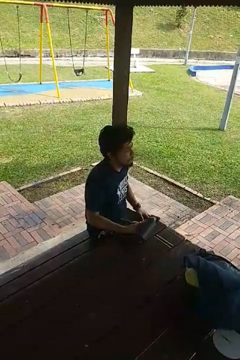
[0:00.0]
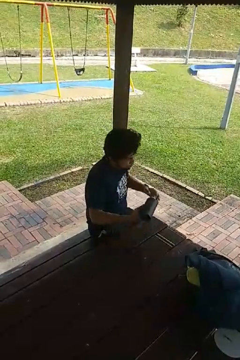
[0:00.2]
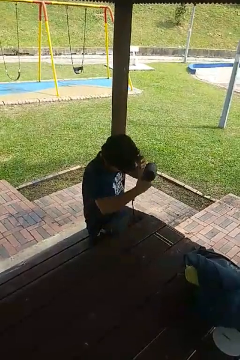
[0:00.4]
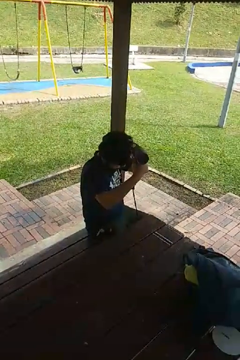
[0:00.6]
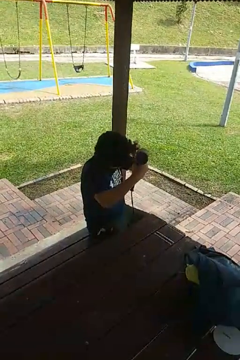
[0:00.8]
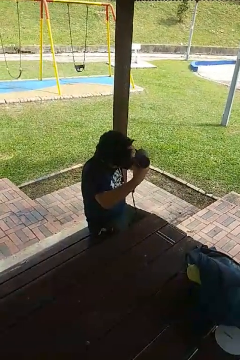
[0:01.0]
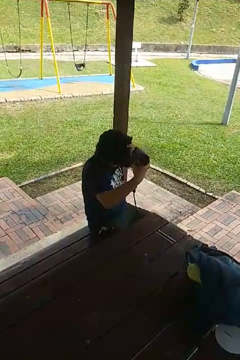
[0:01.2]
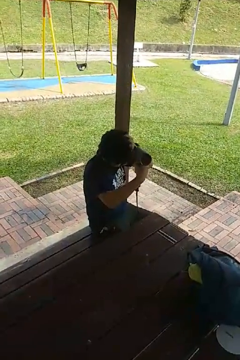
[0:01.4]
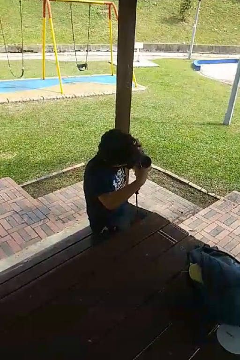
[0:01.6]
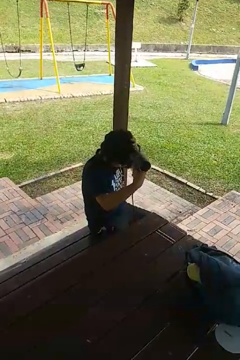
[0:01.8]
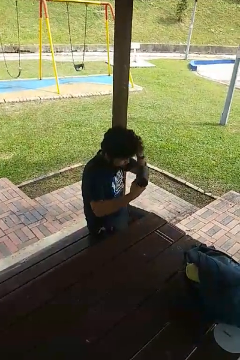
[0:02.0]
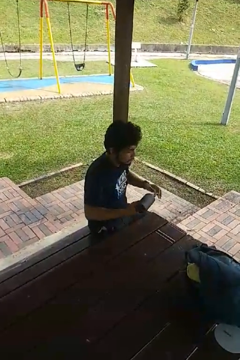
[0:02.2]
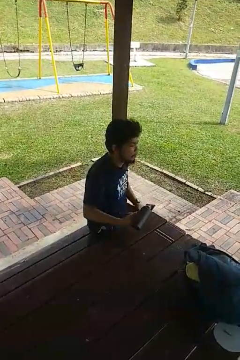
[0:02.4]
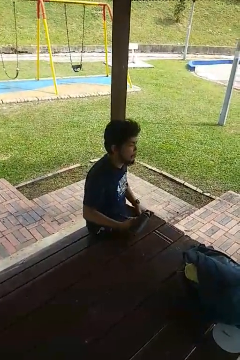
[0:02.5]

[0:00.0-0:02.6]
person dries hair with hairdryer

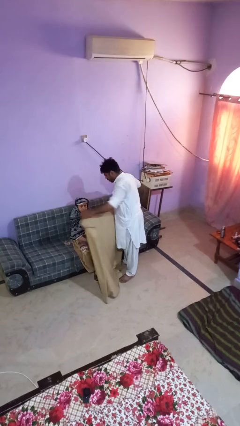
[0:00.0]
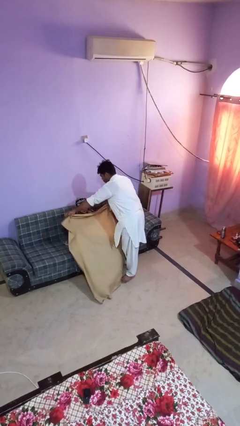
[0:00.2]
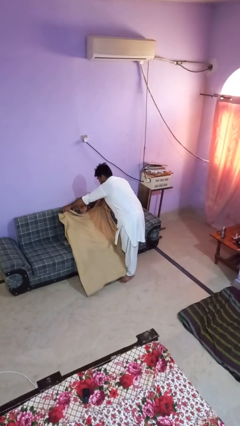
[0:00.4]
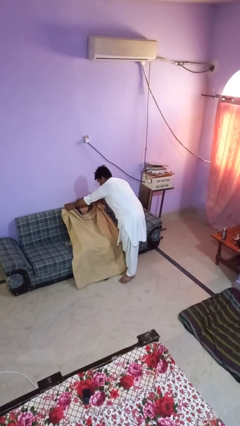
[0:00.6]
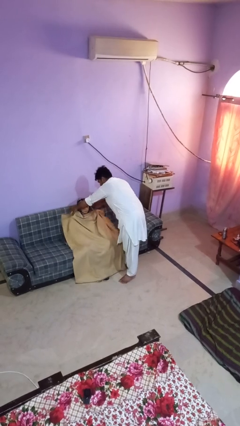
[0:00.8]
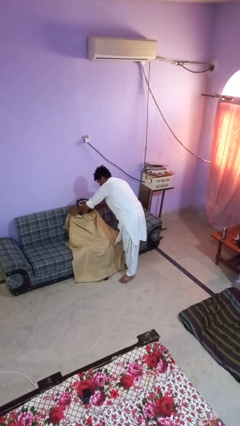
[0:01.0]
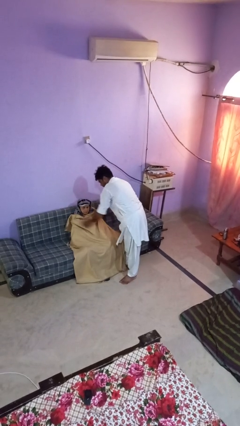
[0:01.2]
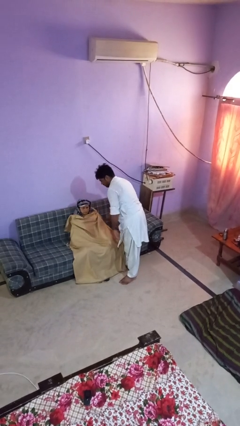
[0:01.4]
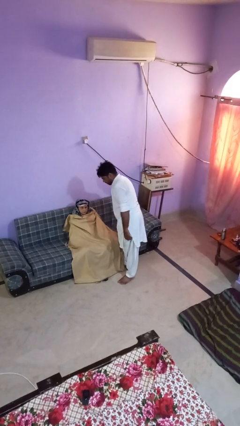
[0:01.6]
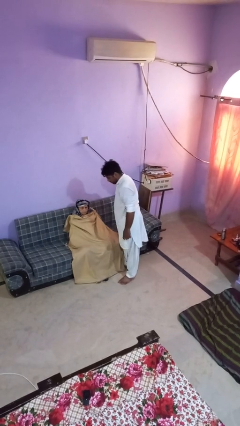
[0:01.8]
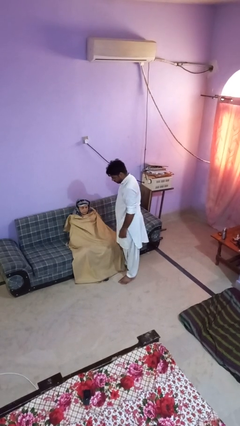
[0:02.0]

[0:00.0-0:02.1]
person covers friend with blanket

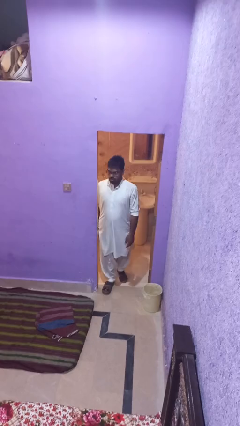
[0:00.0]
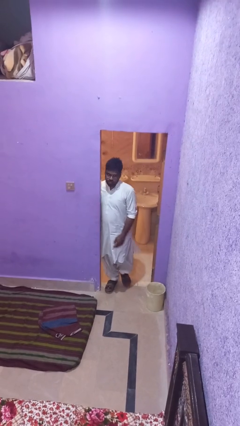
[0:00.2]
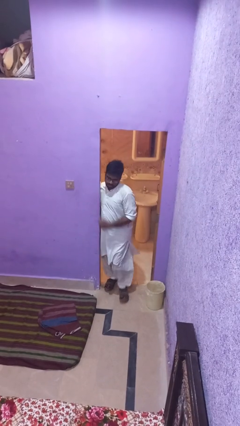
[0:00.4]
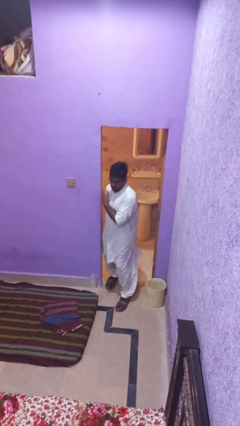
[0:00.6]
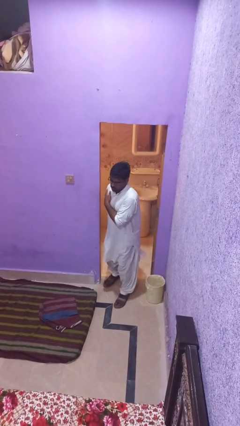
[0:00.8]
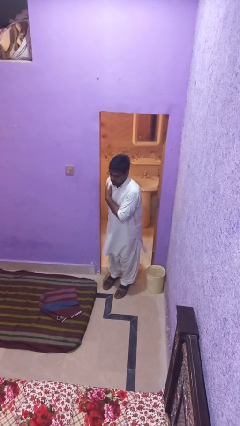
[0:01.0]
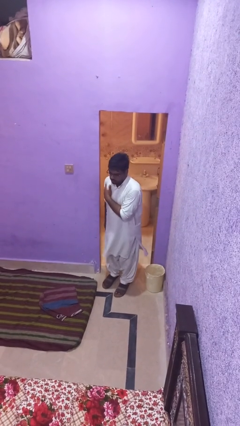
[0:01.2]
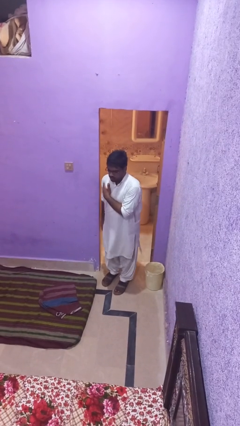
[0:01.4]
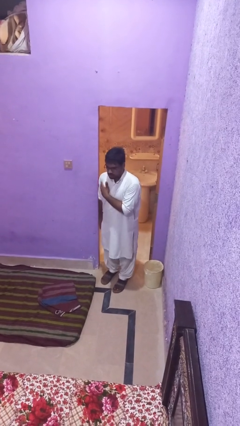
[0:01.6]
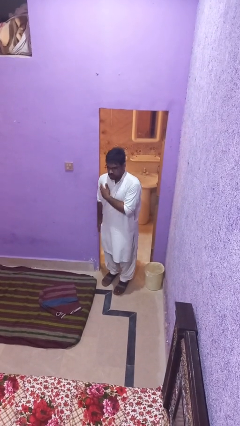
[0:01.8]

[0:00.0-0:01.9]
person bumps into wall

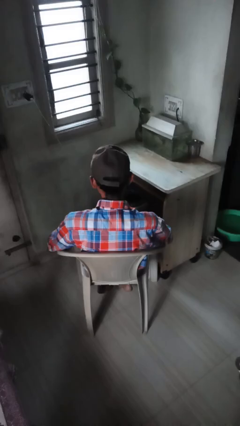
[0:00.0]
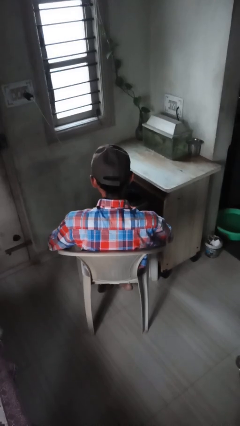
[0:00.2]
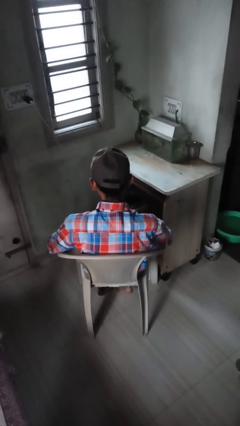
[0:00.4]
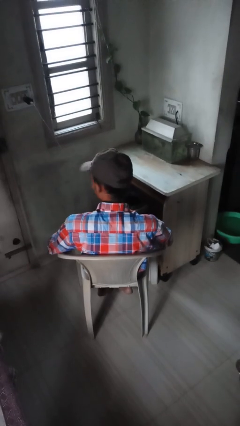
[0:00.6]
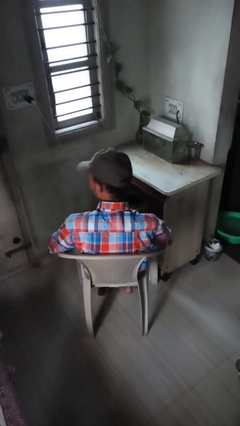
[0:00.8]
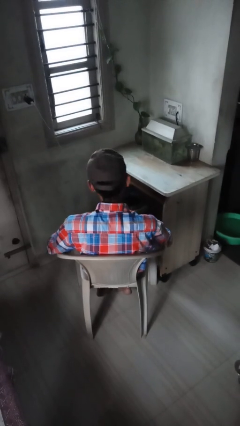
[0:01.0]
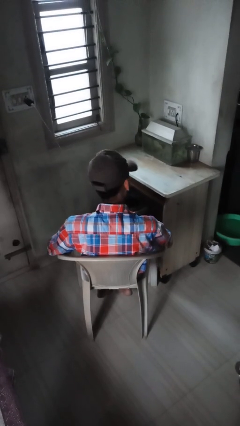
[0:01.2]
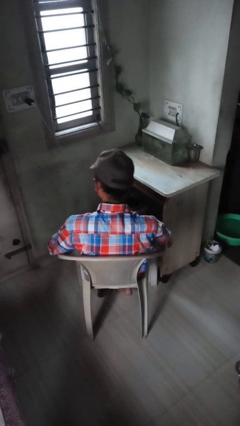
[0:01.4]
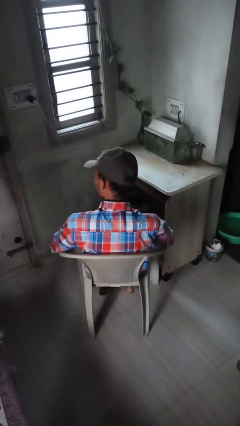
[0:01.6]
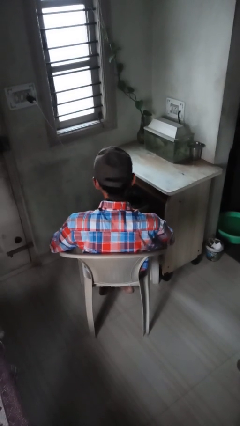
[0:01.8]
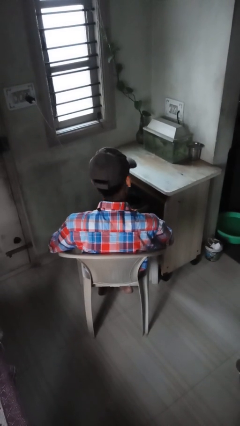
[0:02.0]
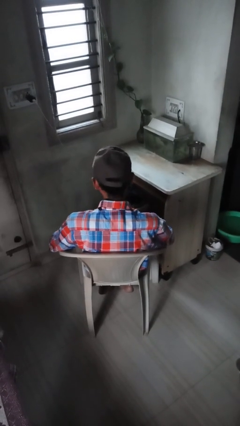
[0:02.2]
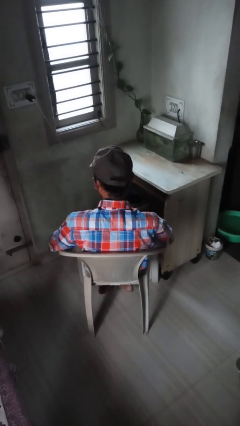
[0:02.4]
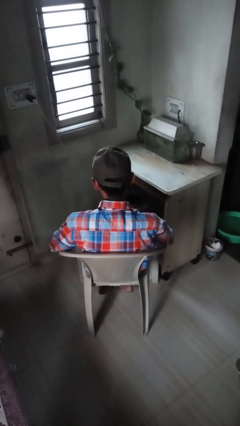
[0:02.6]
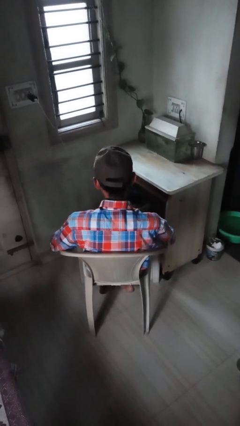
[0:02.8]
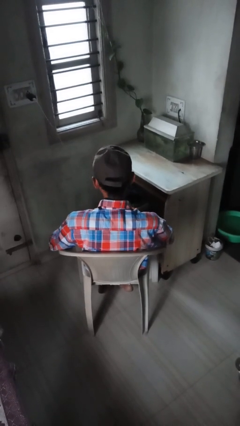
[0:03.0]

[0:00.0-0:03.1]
person shakes head

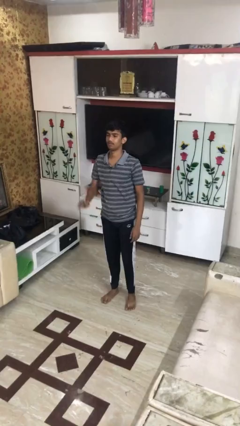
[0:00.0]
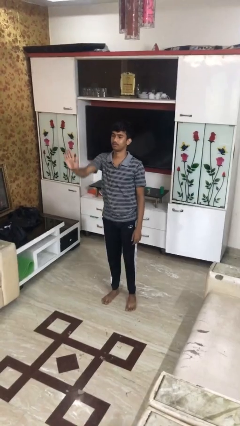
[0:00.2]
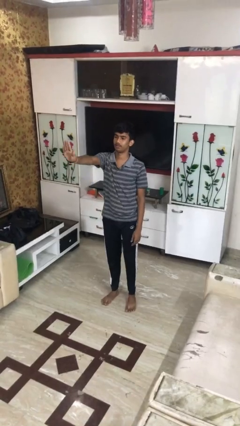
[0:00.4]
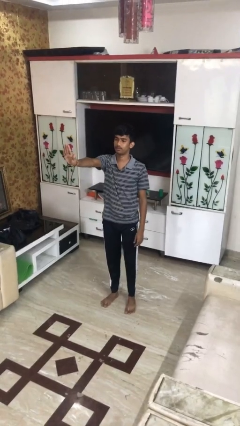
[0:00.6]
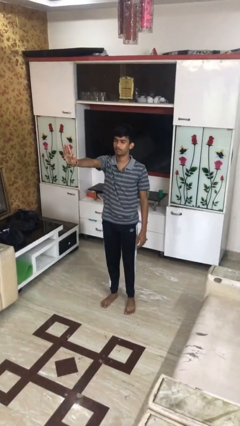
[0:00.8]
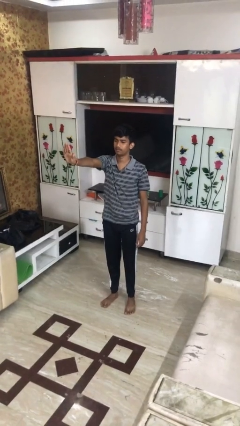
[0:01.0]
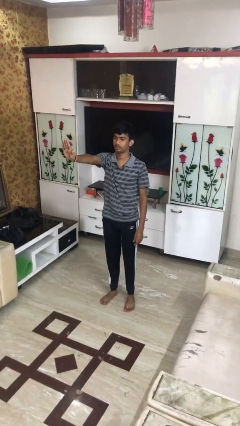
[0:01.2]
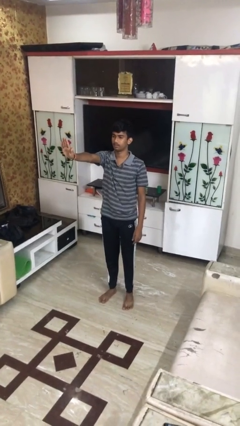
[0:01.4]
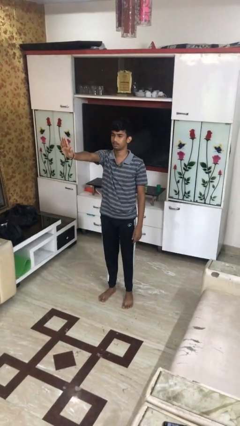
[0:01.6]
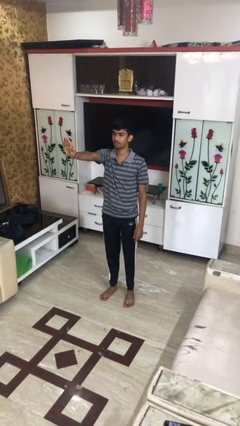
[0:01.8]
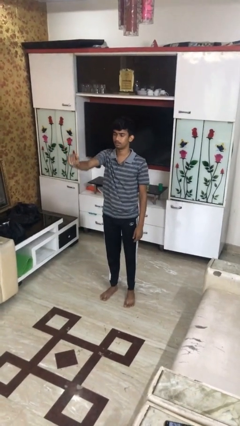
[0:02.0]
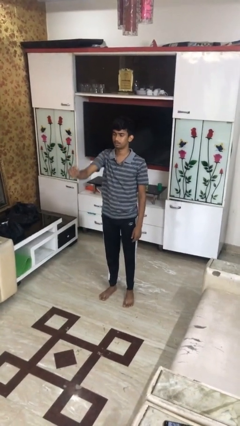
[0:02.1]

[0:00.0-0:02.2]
person gestures stop

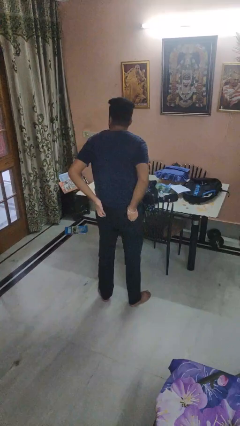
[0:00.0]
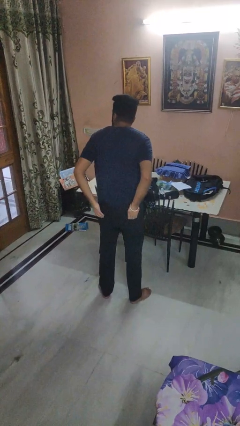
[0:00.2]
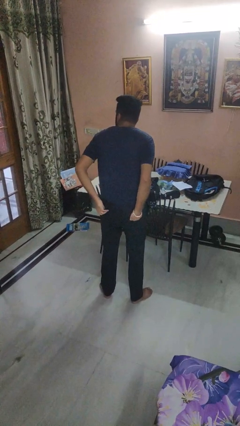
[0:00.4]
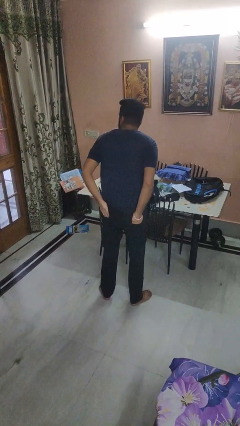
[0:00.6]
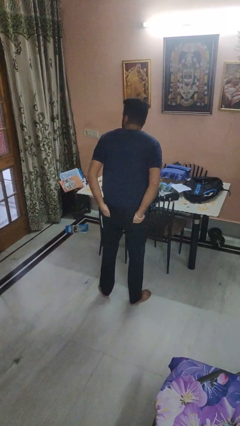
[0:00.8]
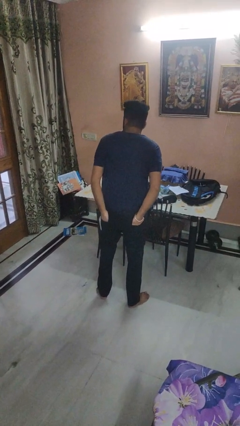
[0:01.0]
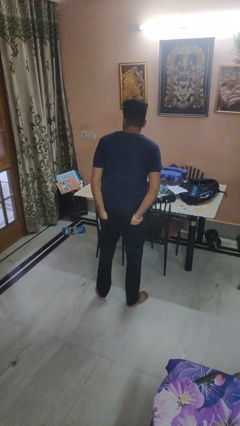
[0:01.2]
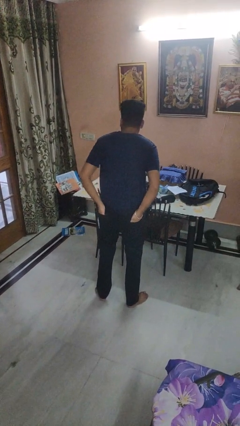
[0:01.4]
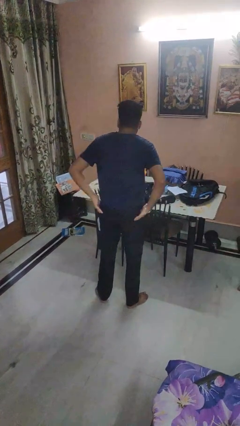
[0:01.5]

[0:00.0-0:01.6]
person puts hands in back pockets

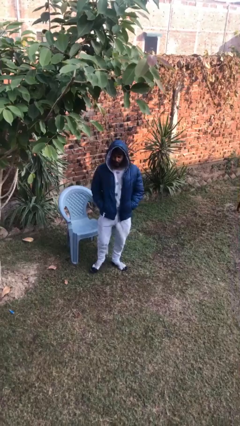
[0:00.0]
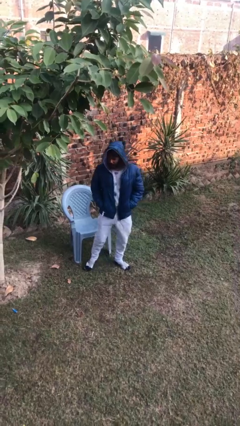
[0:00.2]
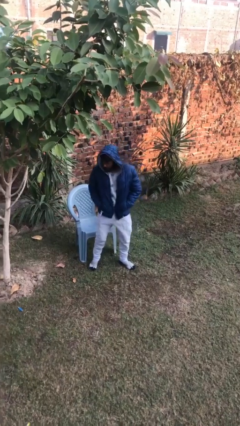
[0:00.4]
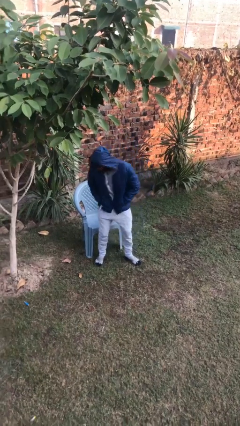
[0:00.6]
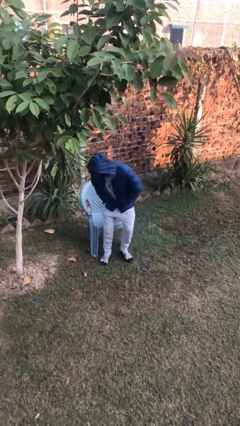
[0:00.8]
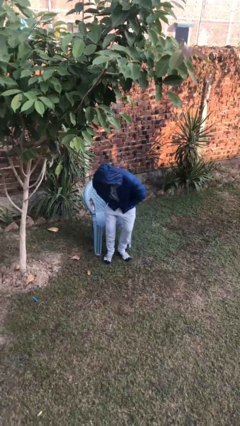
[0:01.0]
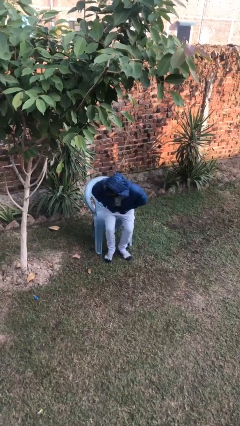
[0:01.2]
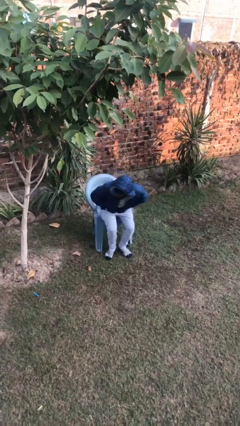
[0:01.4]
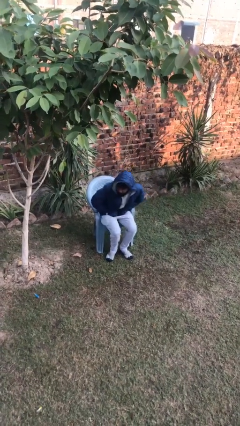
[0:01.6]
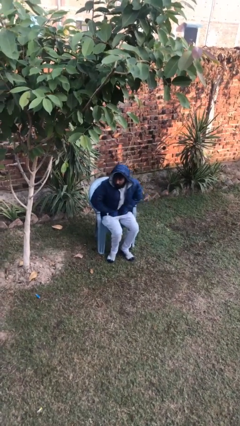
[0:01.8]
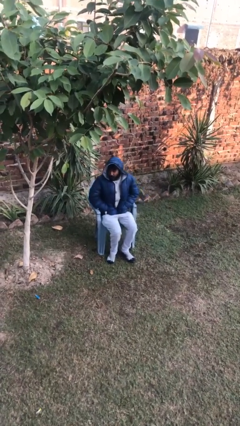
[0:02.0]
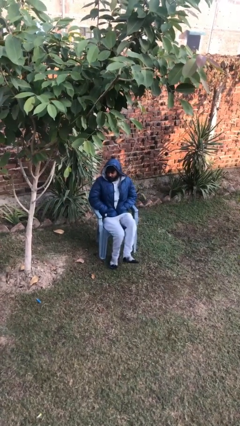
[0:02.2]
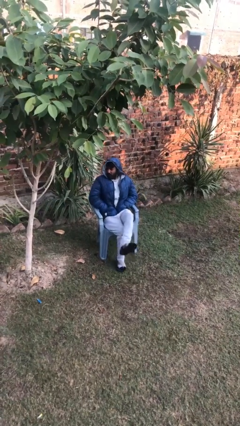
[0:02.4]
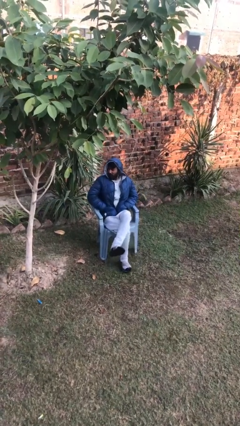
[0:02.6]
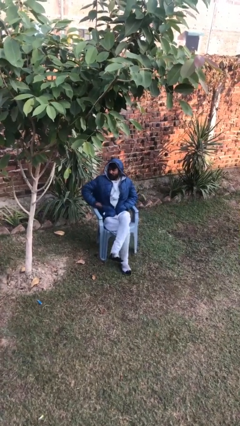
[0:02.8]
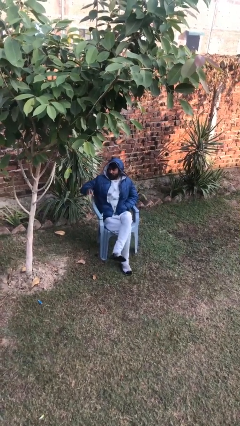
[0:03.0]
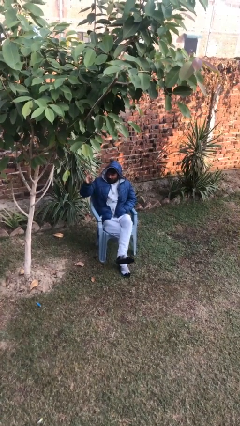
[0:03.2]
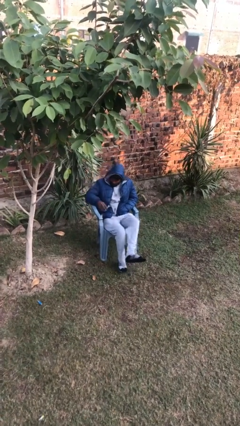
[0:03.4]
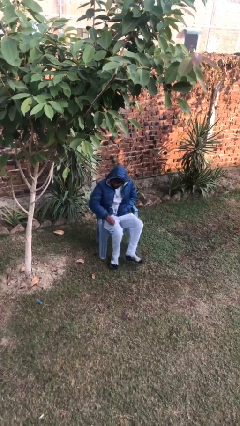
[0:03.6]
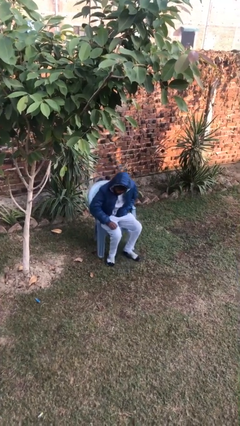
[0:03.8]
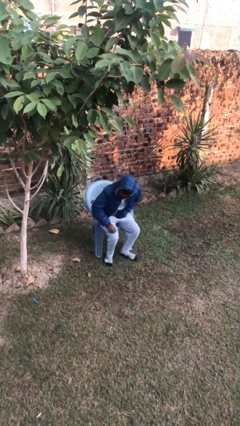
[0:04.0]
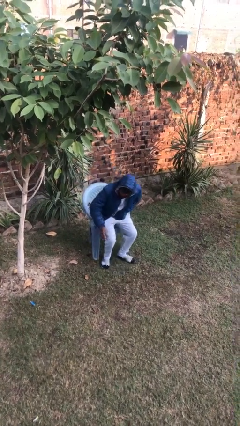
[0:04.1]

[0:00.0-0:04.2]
person sits down

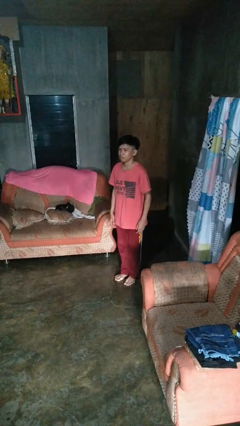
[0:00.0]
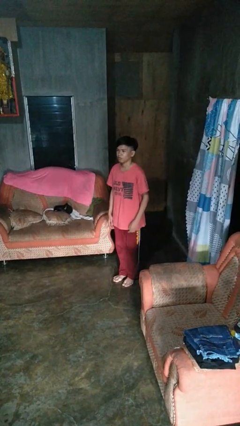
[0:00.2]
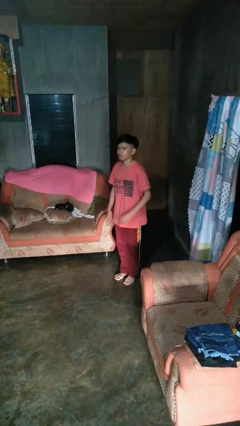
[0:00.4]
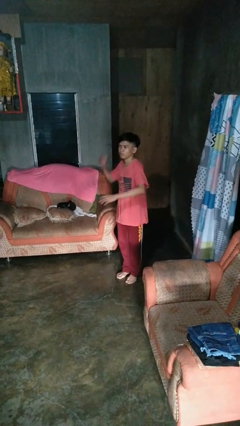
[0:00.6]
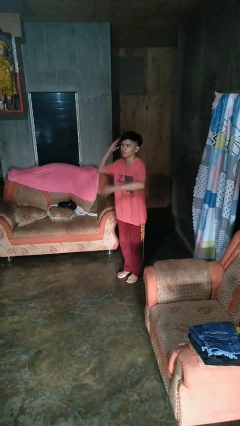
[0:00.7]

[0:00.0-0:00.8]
person karate chop
